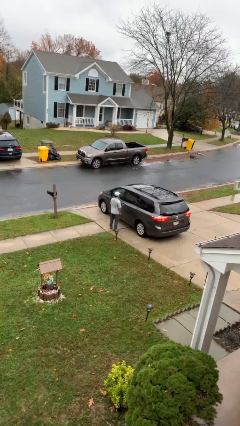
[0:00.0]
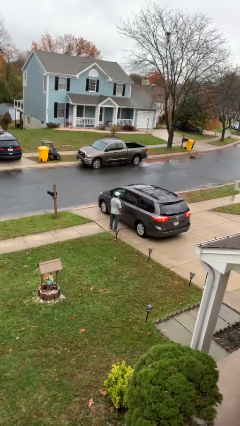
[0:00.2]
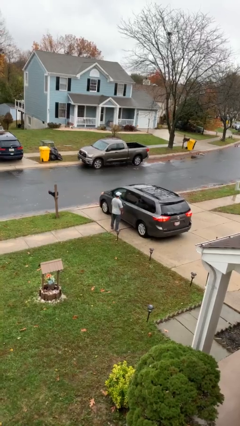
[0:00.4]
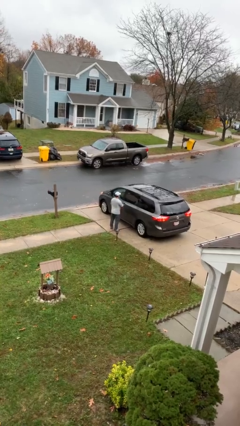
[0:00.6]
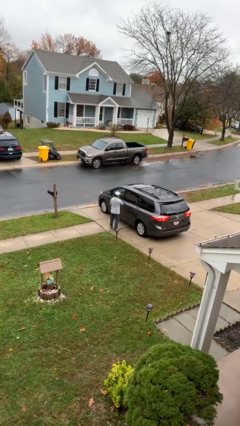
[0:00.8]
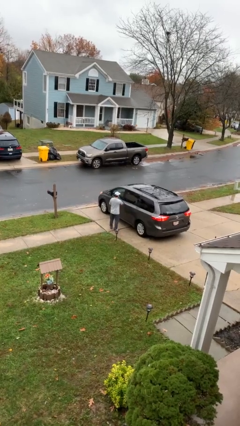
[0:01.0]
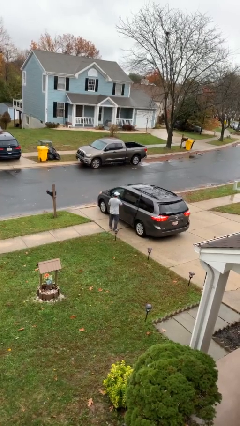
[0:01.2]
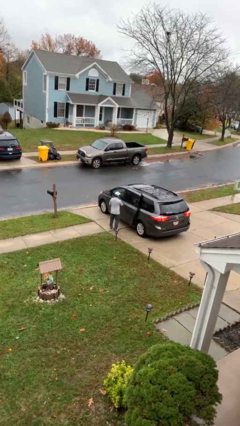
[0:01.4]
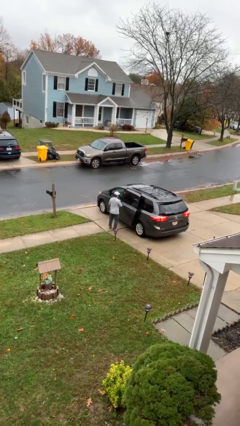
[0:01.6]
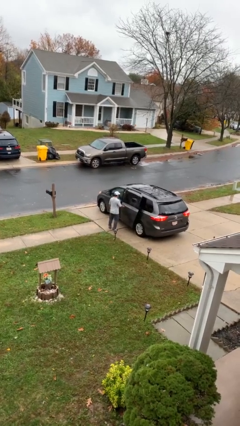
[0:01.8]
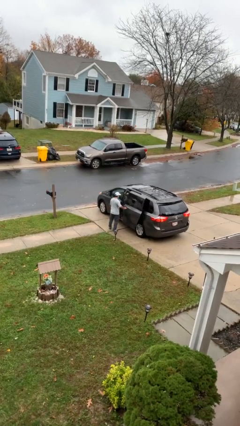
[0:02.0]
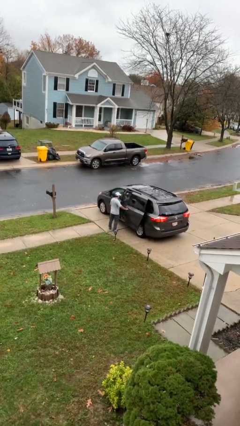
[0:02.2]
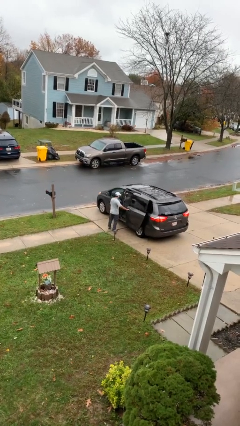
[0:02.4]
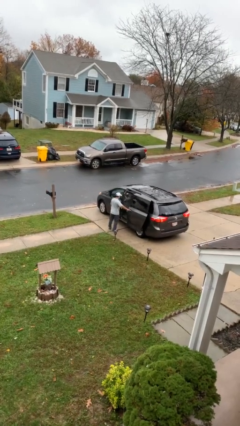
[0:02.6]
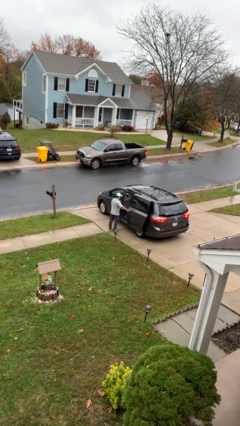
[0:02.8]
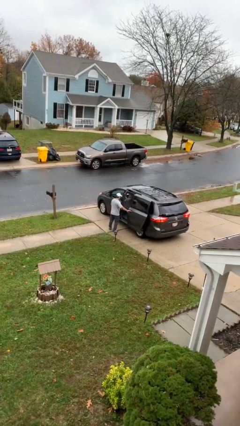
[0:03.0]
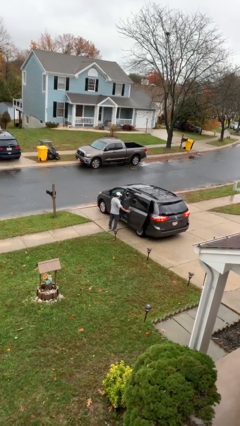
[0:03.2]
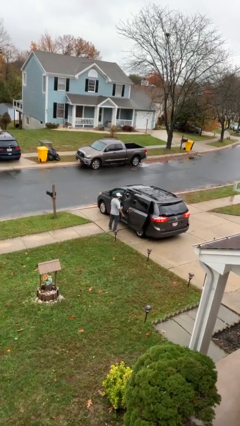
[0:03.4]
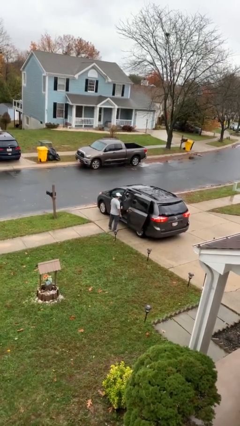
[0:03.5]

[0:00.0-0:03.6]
person opens car door

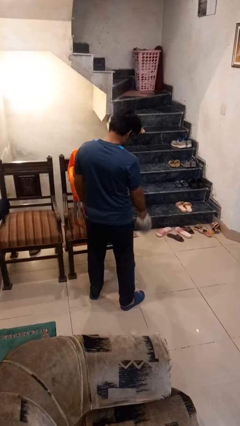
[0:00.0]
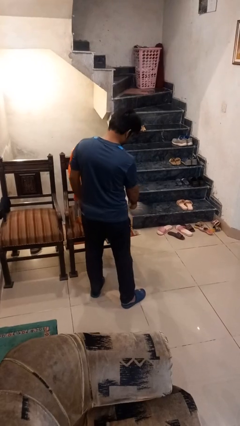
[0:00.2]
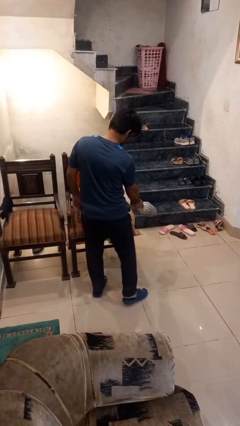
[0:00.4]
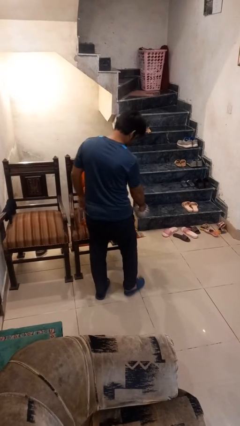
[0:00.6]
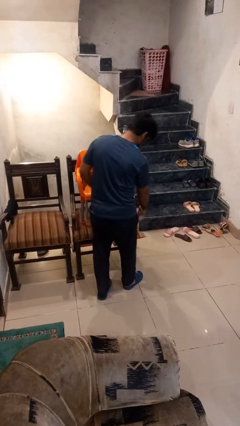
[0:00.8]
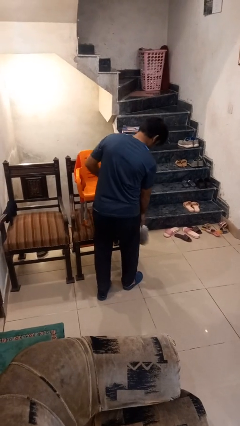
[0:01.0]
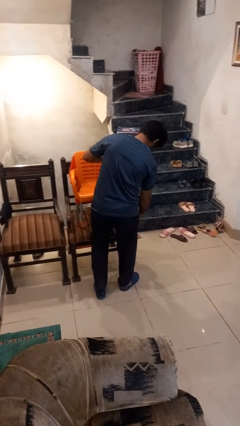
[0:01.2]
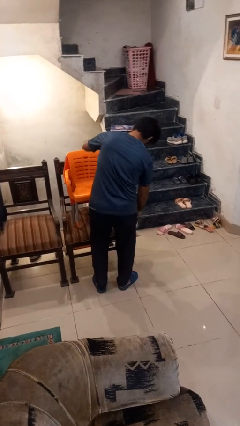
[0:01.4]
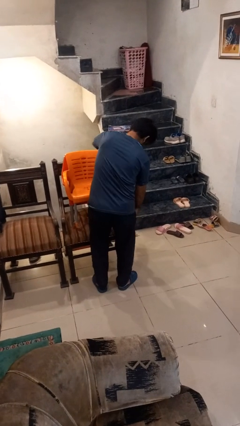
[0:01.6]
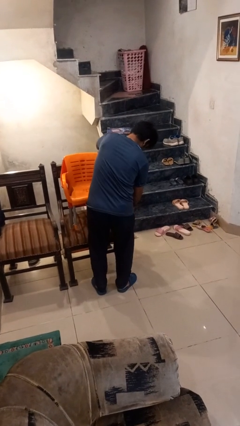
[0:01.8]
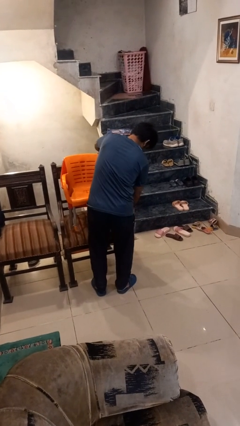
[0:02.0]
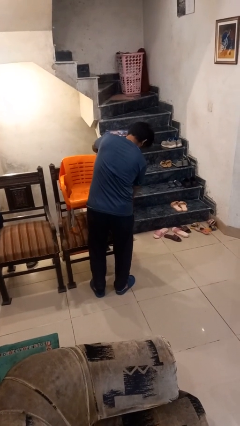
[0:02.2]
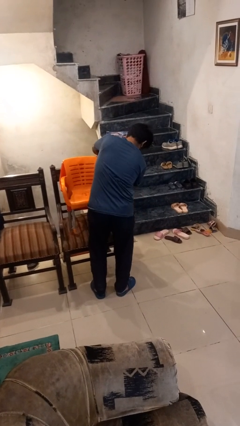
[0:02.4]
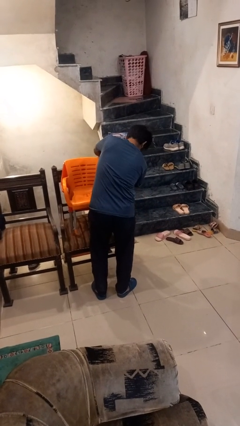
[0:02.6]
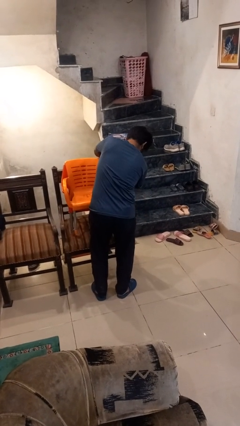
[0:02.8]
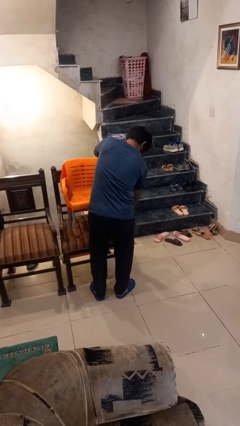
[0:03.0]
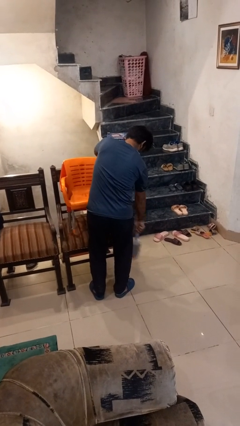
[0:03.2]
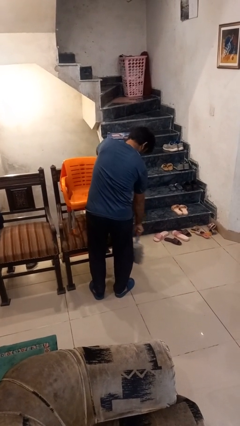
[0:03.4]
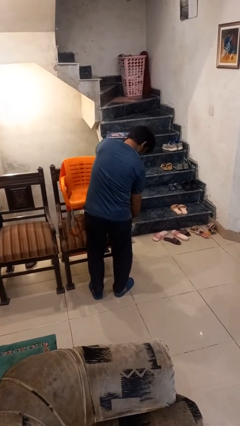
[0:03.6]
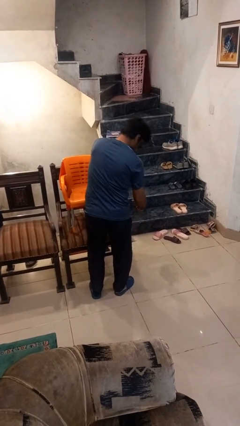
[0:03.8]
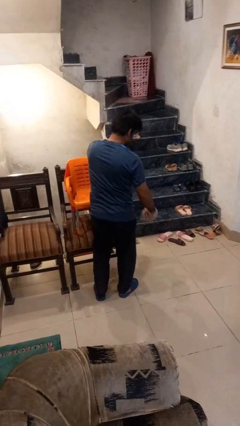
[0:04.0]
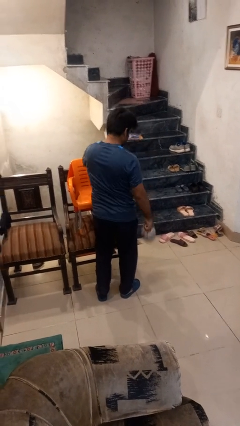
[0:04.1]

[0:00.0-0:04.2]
person dusts furniture

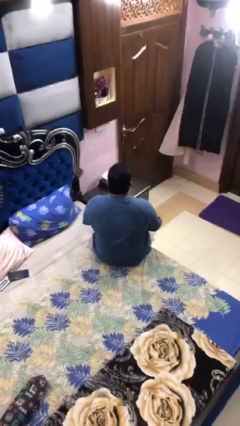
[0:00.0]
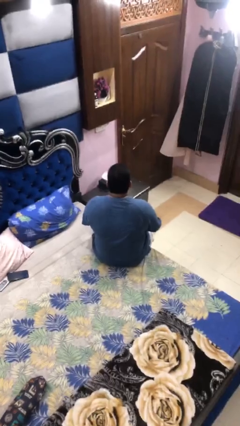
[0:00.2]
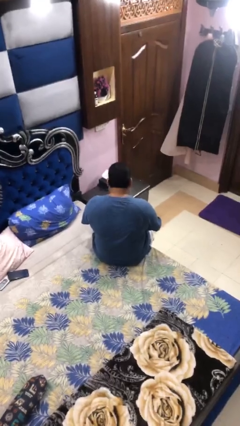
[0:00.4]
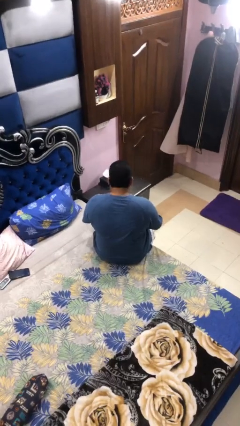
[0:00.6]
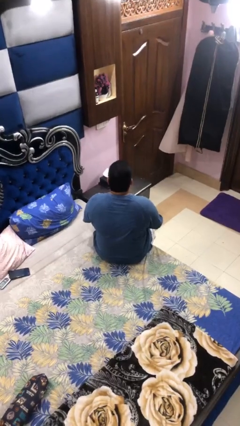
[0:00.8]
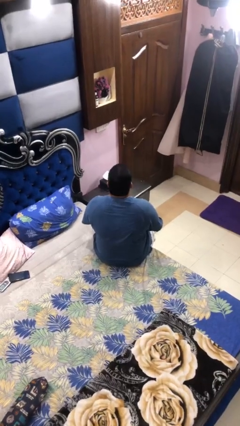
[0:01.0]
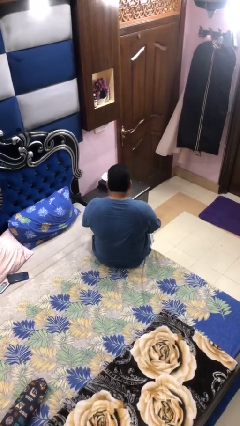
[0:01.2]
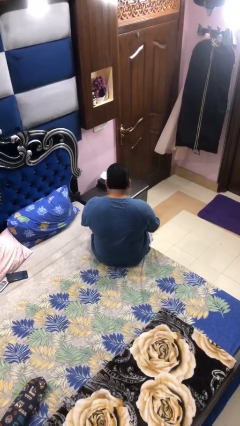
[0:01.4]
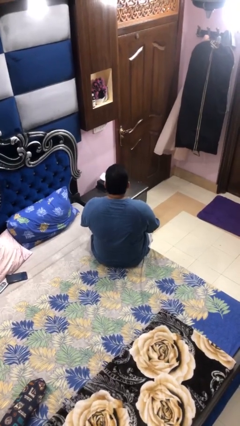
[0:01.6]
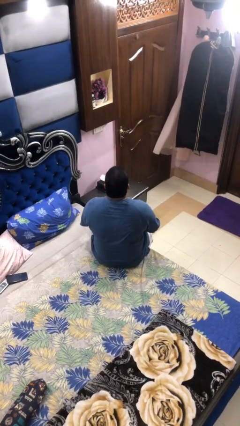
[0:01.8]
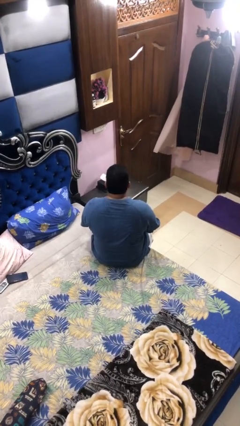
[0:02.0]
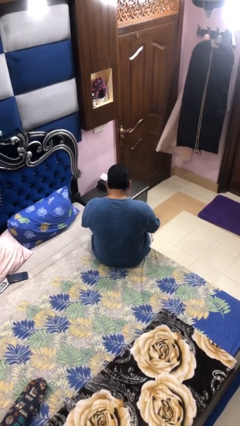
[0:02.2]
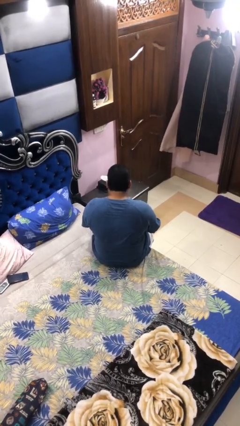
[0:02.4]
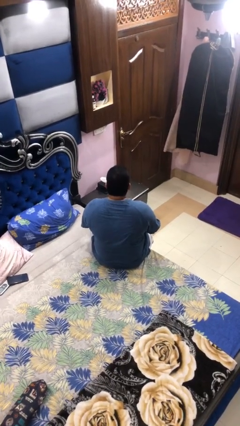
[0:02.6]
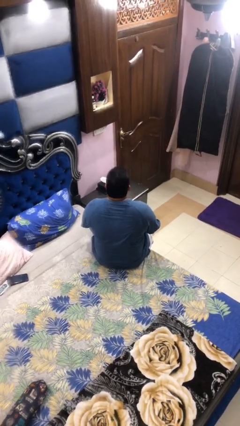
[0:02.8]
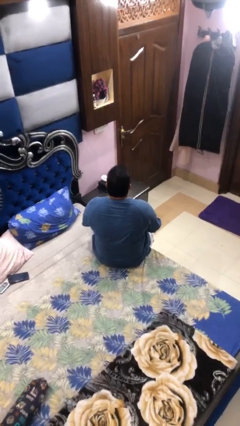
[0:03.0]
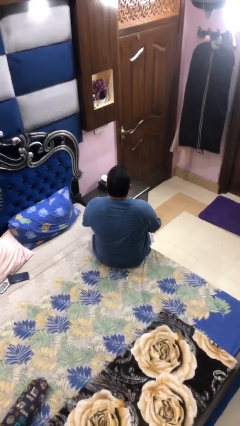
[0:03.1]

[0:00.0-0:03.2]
person nods head

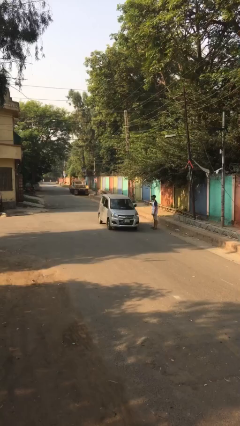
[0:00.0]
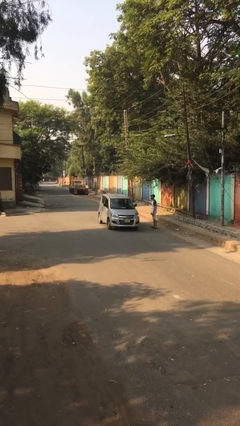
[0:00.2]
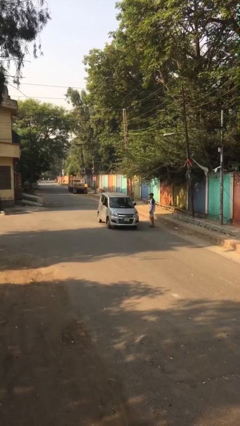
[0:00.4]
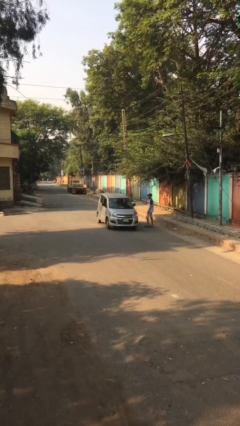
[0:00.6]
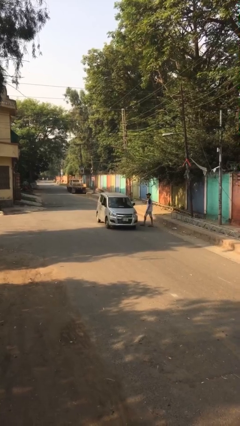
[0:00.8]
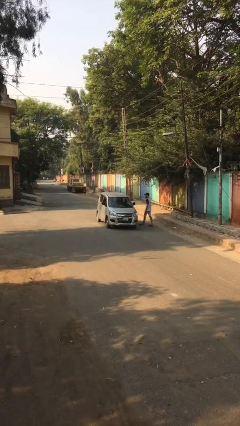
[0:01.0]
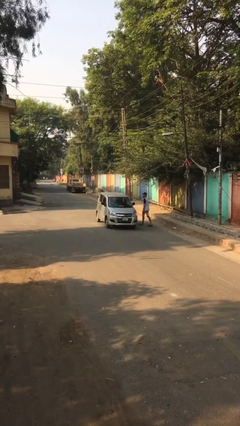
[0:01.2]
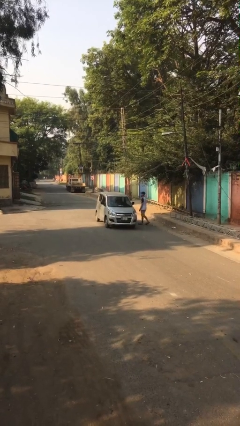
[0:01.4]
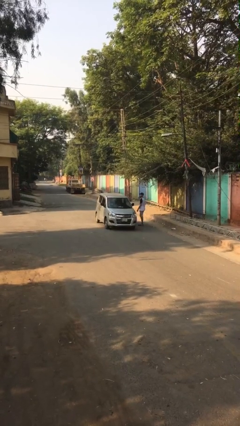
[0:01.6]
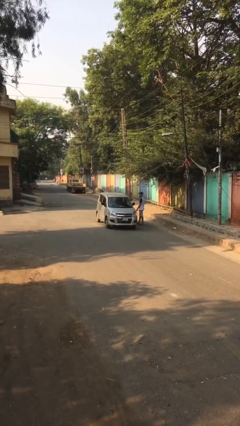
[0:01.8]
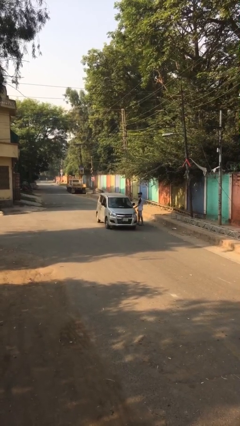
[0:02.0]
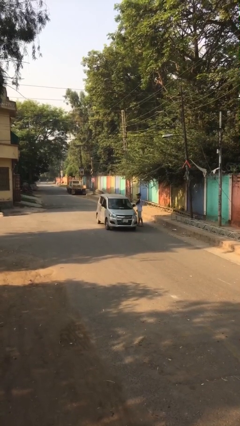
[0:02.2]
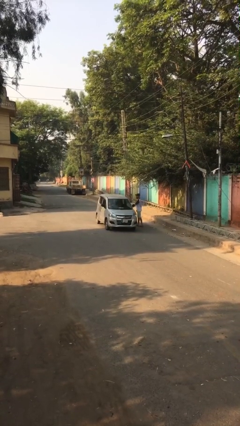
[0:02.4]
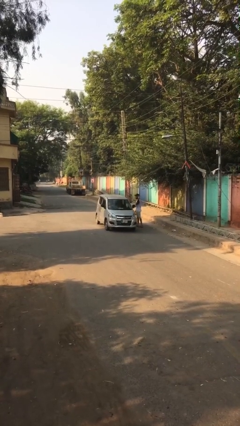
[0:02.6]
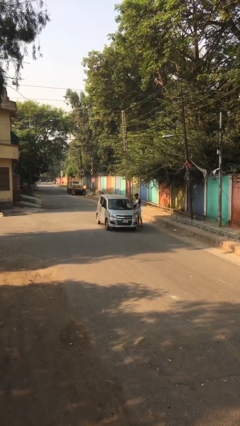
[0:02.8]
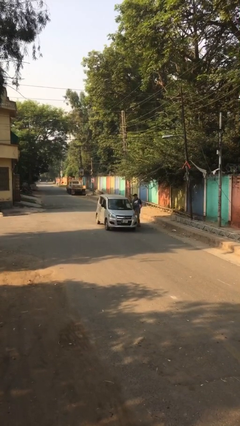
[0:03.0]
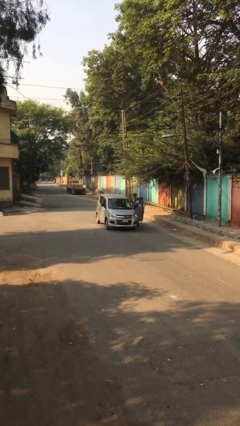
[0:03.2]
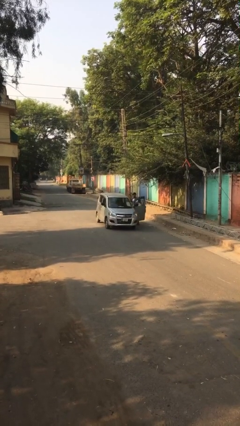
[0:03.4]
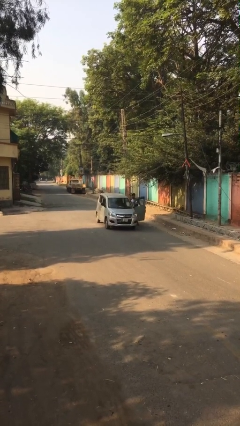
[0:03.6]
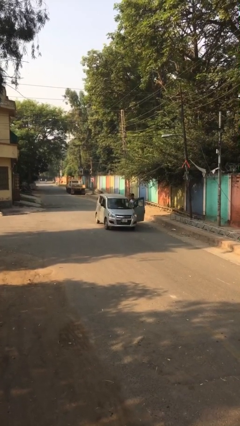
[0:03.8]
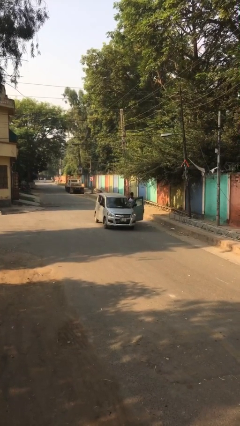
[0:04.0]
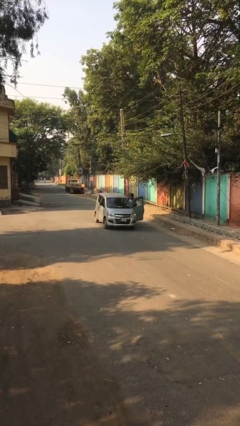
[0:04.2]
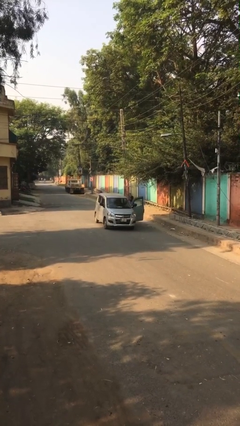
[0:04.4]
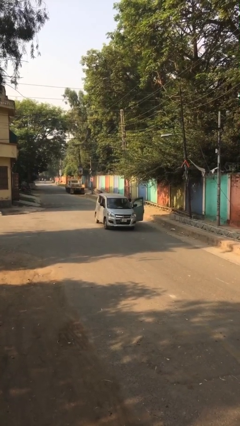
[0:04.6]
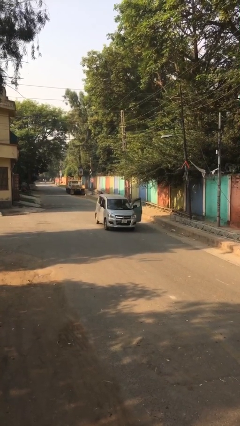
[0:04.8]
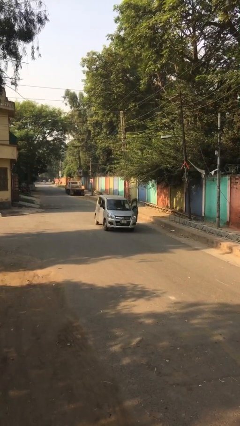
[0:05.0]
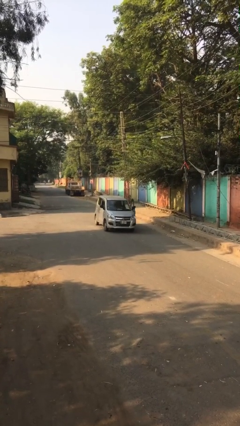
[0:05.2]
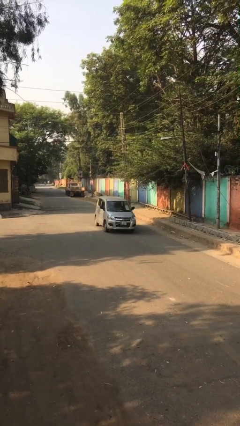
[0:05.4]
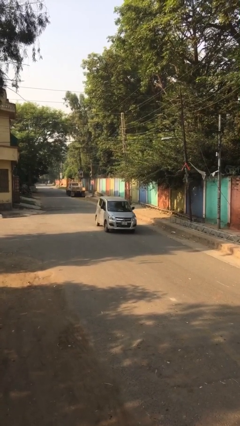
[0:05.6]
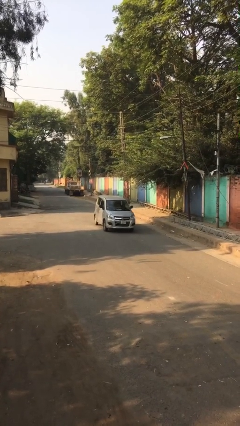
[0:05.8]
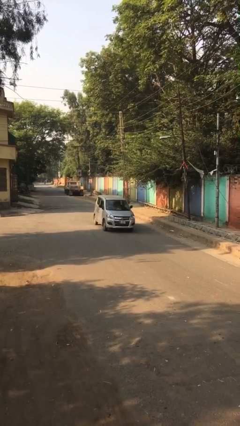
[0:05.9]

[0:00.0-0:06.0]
car picks up person

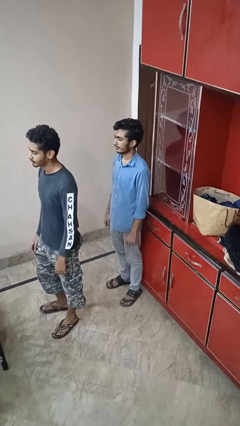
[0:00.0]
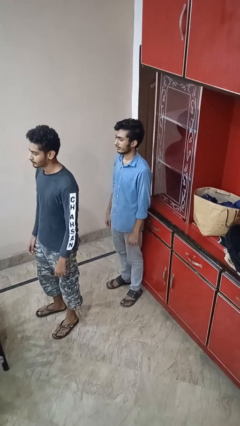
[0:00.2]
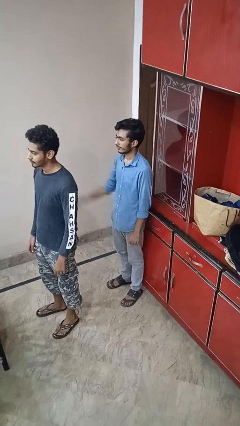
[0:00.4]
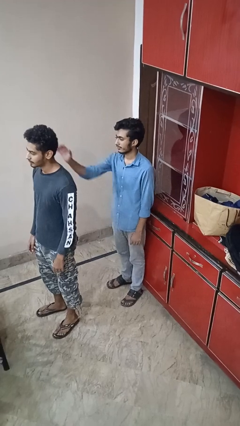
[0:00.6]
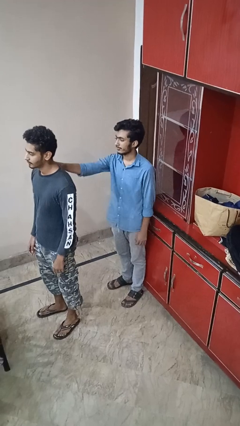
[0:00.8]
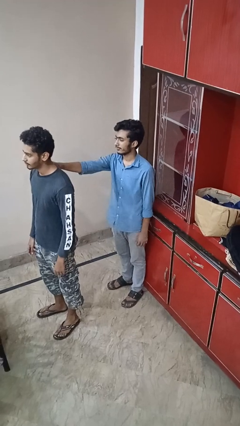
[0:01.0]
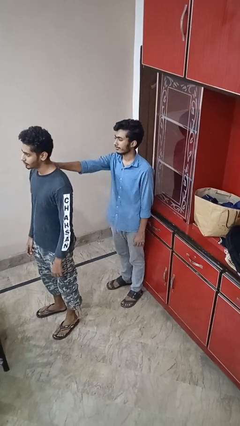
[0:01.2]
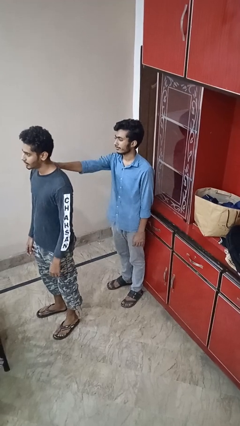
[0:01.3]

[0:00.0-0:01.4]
person grabs person by shoulder
